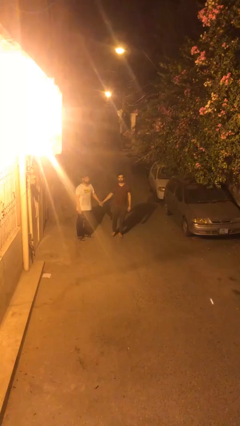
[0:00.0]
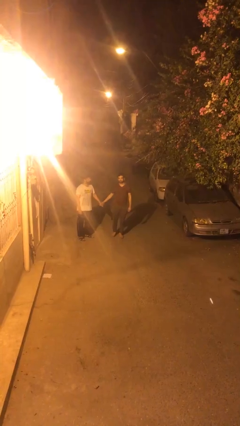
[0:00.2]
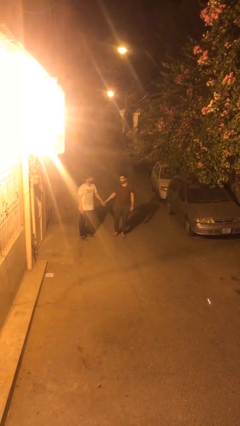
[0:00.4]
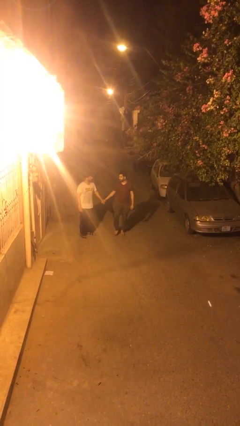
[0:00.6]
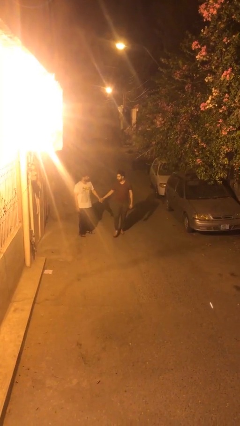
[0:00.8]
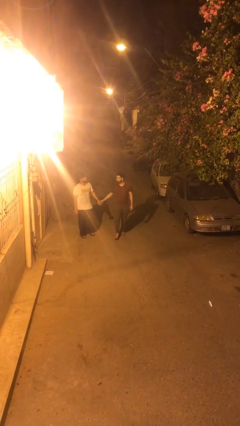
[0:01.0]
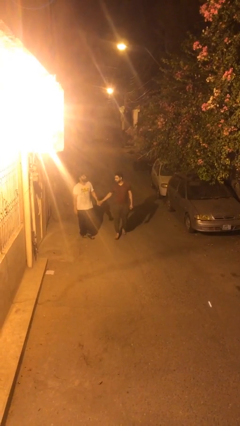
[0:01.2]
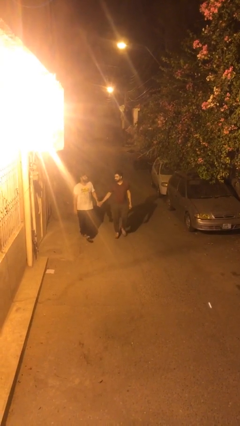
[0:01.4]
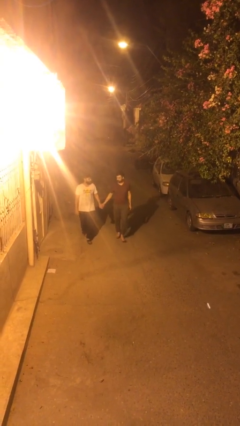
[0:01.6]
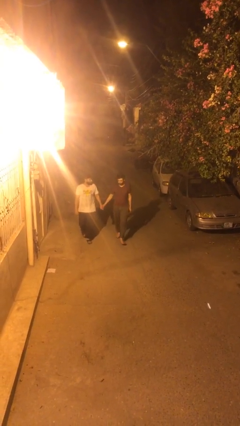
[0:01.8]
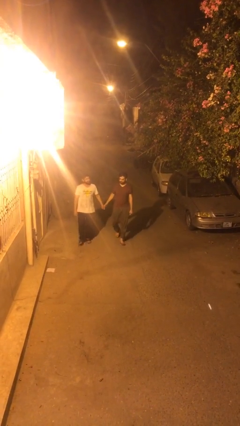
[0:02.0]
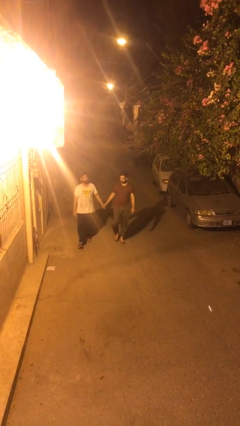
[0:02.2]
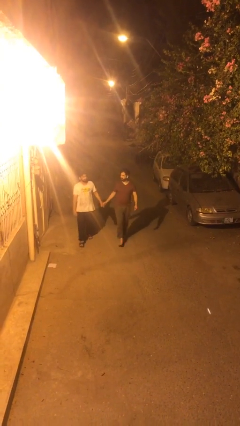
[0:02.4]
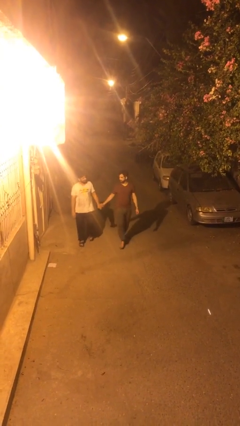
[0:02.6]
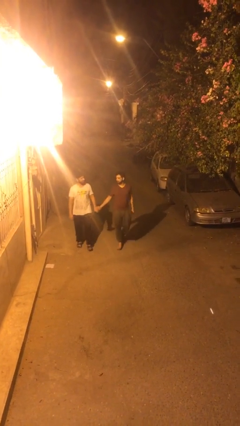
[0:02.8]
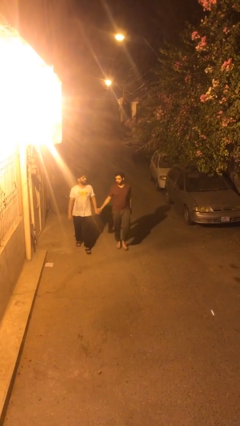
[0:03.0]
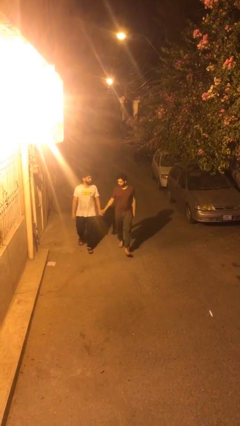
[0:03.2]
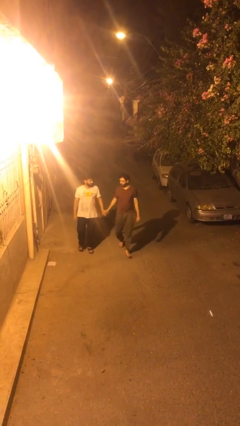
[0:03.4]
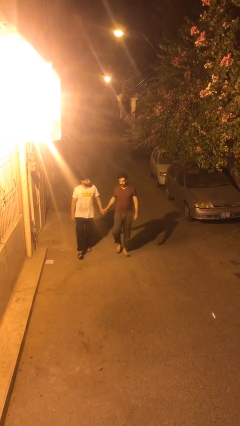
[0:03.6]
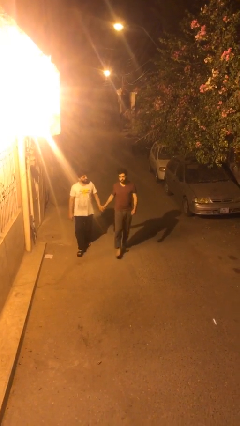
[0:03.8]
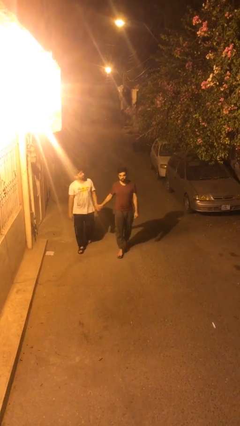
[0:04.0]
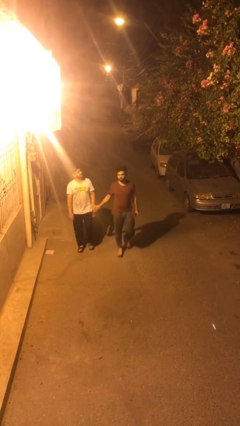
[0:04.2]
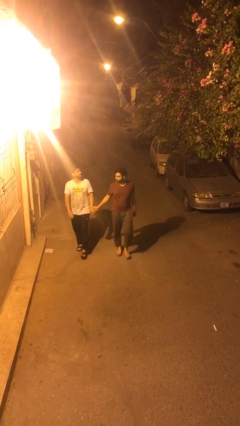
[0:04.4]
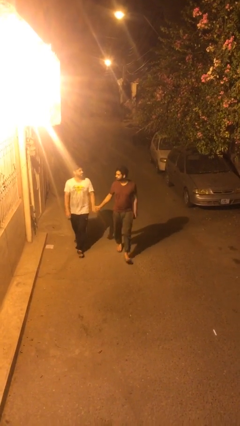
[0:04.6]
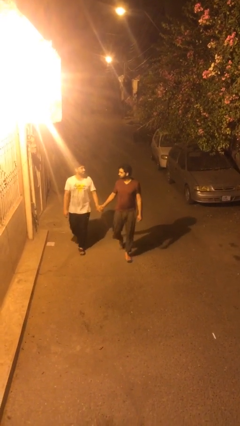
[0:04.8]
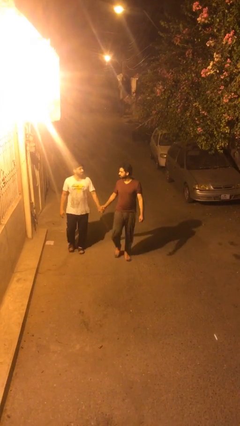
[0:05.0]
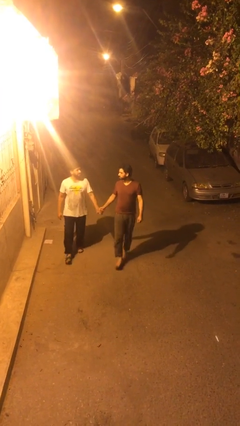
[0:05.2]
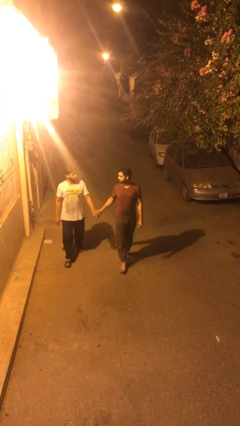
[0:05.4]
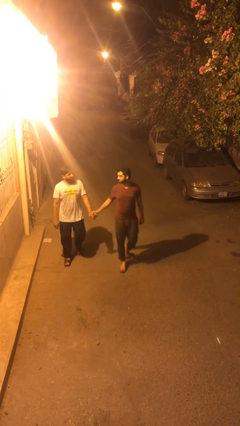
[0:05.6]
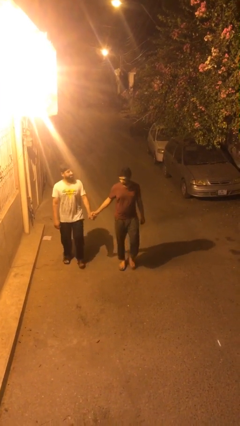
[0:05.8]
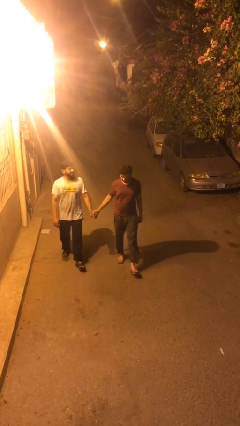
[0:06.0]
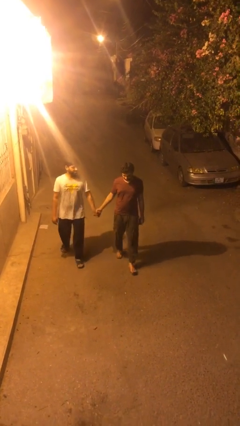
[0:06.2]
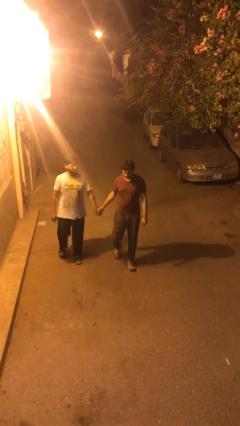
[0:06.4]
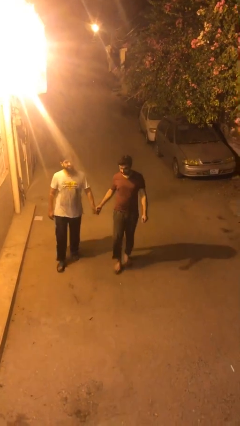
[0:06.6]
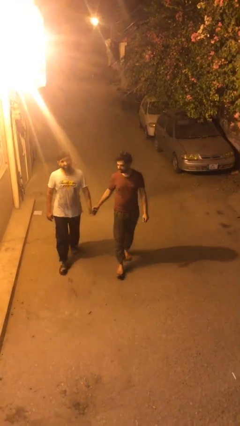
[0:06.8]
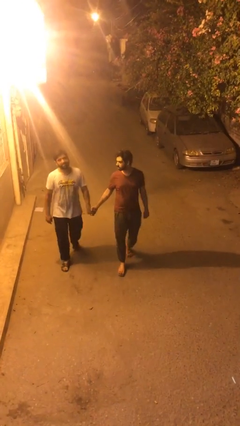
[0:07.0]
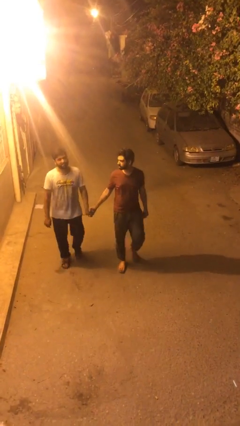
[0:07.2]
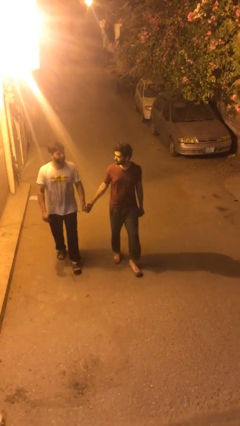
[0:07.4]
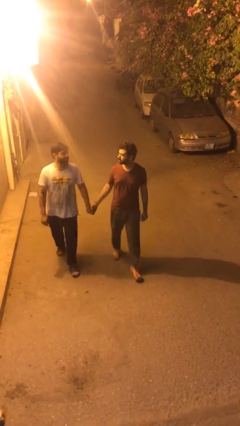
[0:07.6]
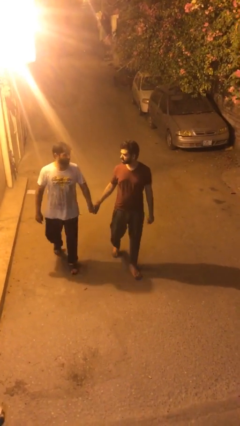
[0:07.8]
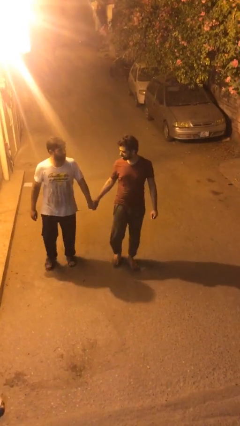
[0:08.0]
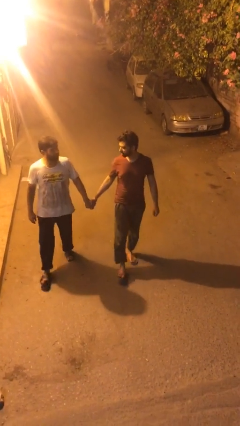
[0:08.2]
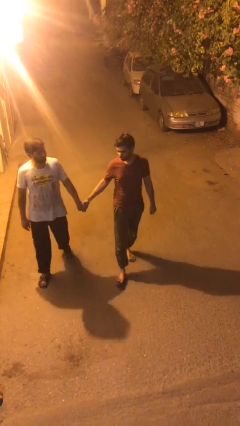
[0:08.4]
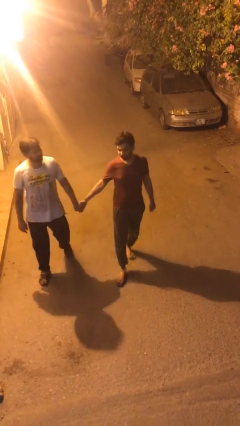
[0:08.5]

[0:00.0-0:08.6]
person holds hand

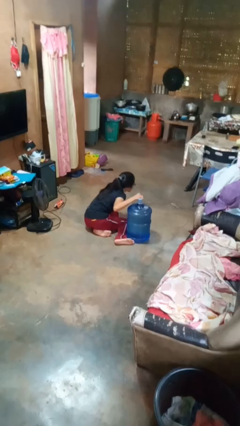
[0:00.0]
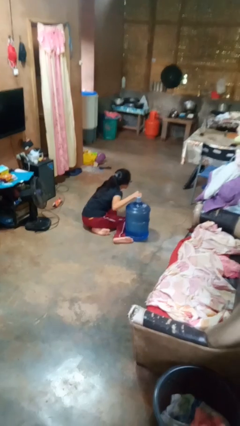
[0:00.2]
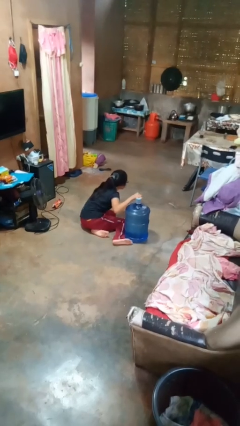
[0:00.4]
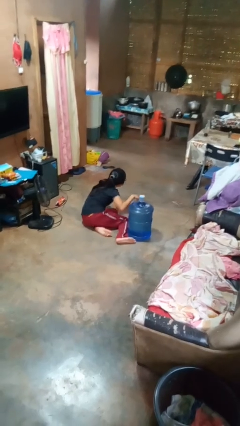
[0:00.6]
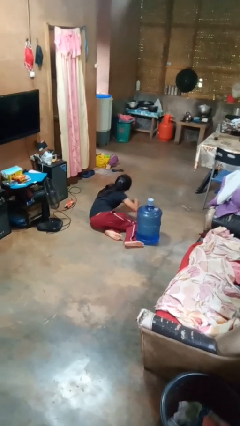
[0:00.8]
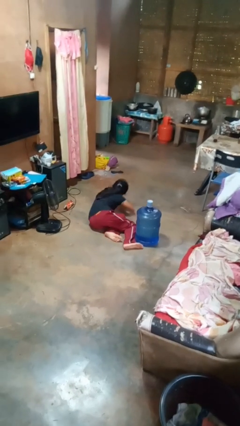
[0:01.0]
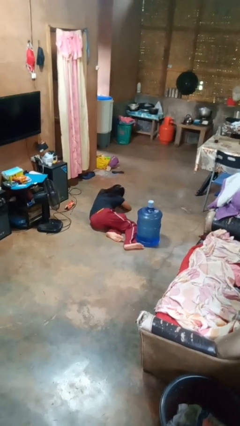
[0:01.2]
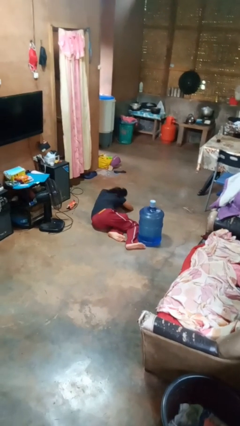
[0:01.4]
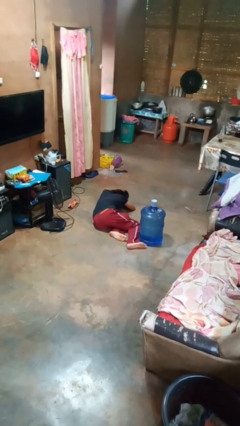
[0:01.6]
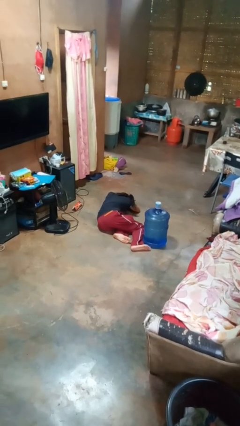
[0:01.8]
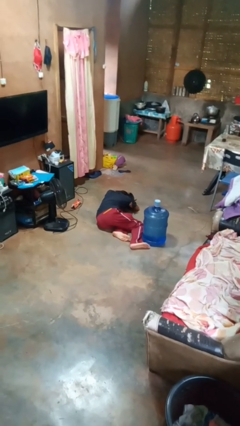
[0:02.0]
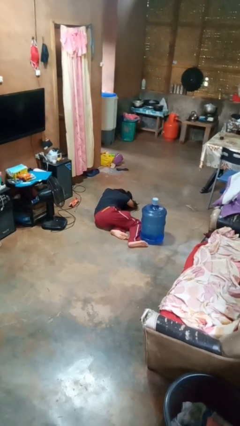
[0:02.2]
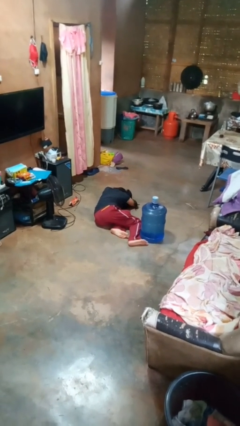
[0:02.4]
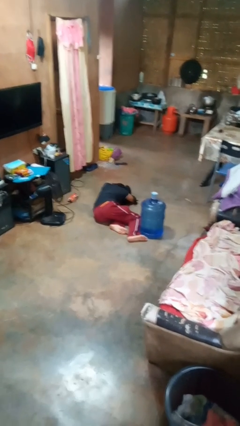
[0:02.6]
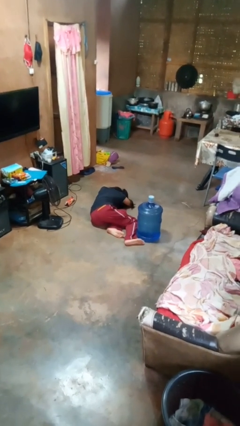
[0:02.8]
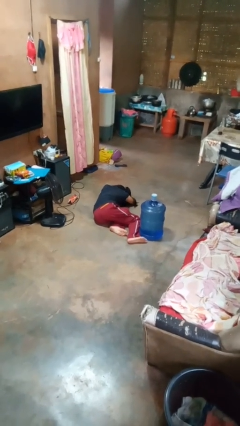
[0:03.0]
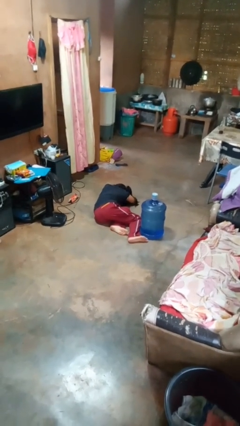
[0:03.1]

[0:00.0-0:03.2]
person lies down on floor

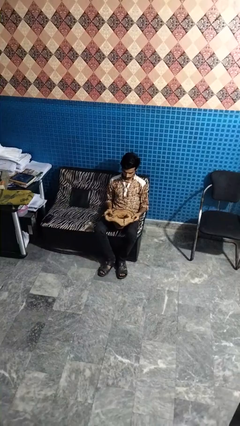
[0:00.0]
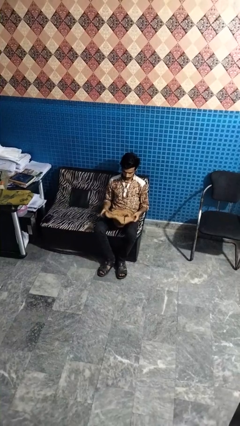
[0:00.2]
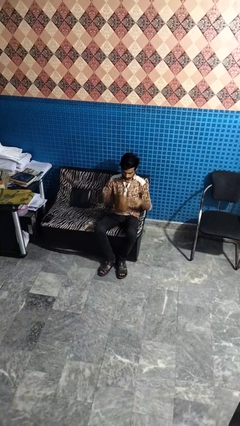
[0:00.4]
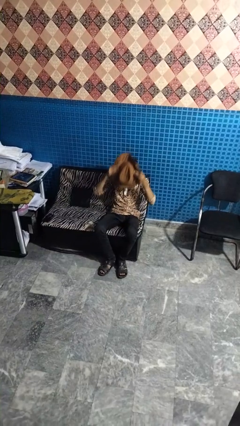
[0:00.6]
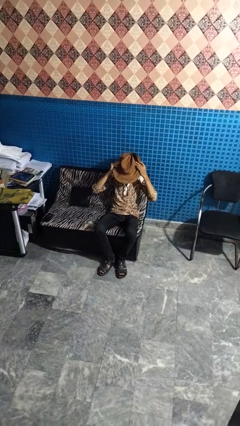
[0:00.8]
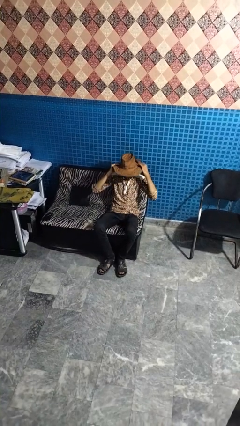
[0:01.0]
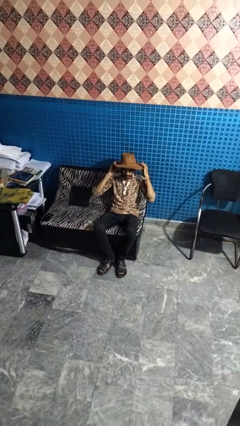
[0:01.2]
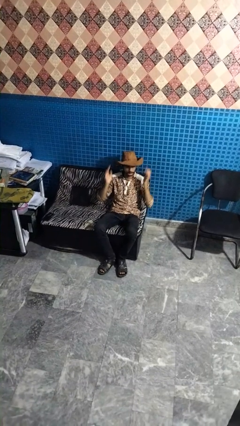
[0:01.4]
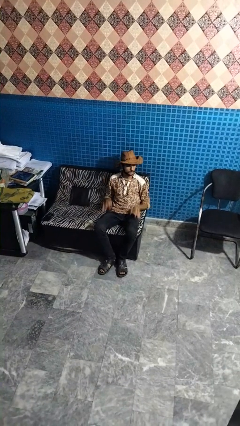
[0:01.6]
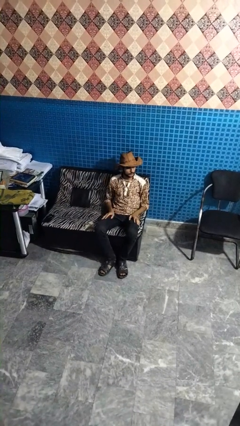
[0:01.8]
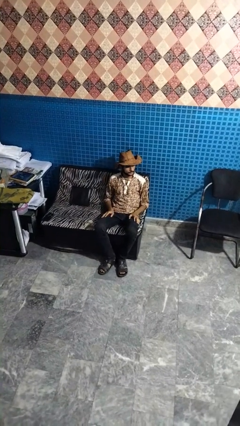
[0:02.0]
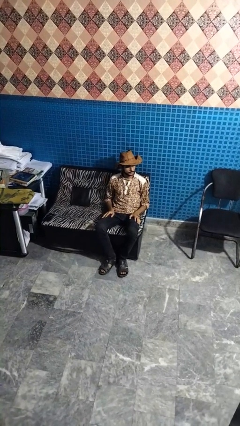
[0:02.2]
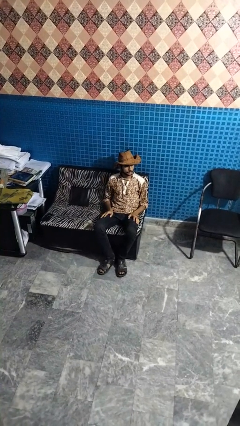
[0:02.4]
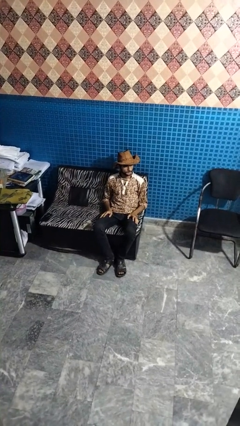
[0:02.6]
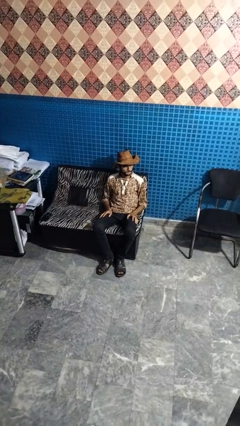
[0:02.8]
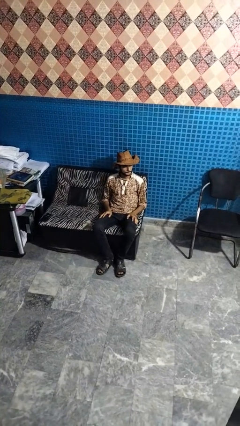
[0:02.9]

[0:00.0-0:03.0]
person puts on hat

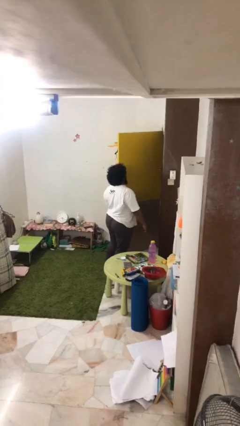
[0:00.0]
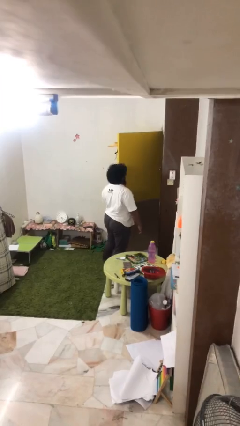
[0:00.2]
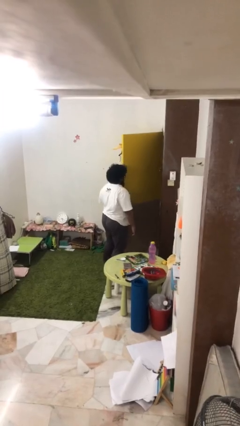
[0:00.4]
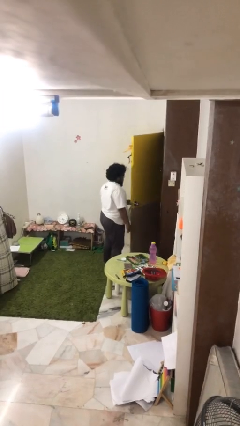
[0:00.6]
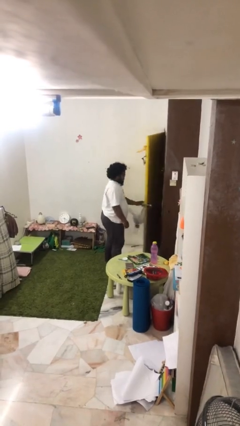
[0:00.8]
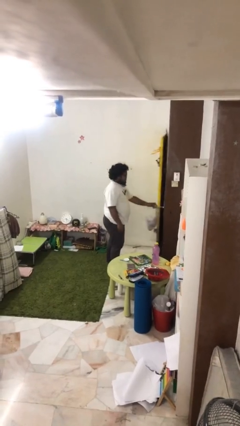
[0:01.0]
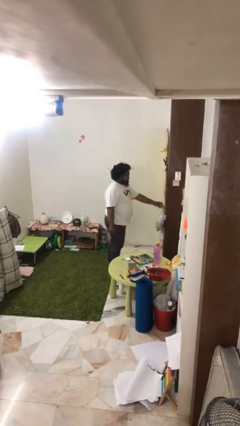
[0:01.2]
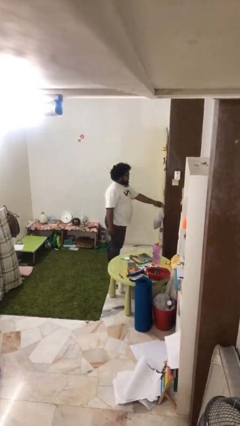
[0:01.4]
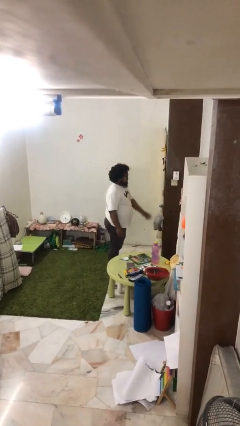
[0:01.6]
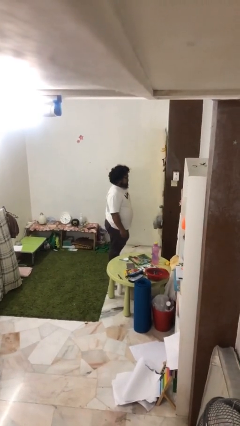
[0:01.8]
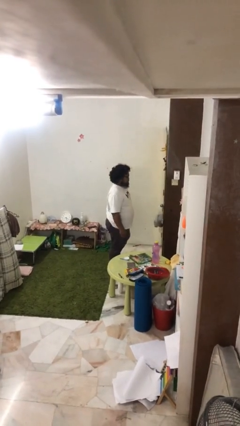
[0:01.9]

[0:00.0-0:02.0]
person closes facility door

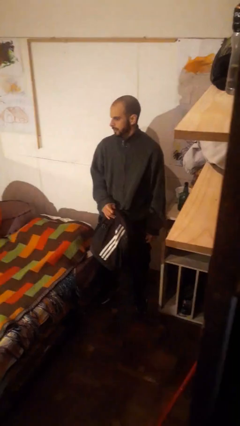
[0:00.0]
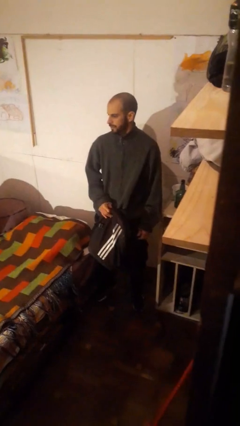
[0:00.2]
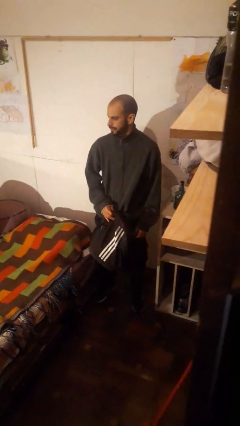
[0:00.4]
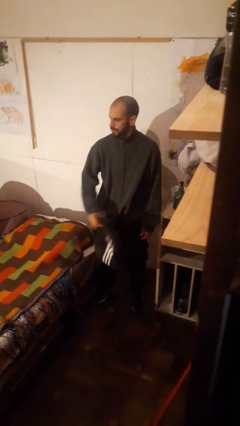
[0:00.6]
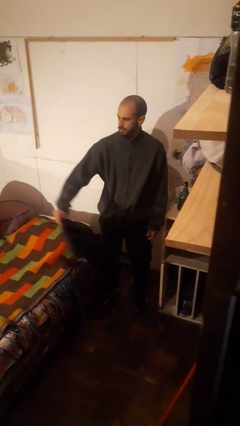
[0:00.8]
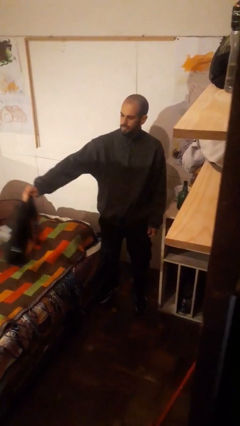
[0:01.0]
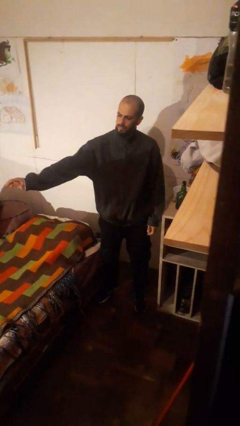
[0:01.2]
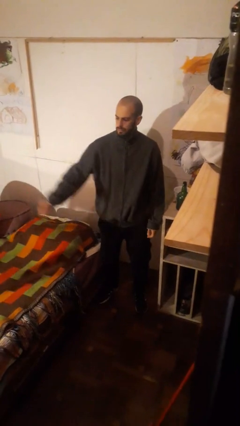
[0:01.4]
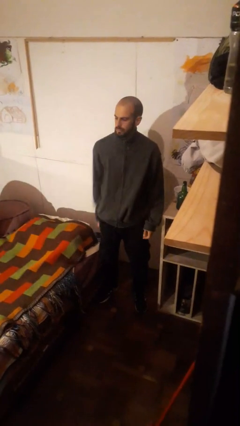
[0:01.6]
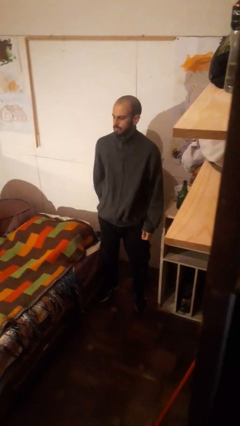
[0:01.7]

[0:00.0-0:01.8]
person throws object on bed
